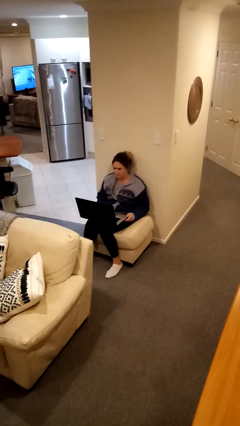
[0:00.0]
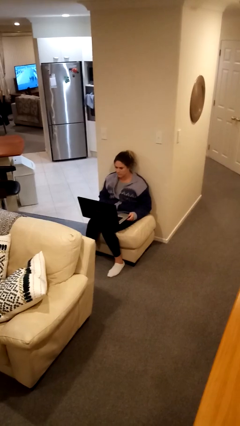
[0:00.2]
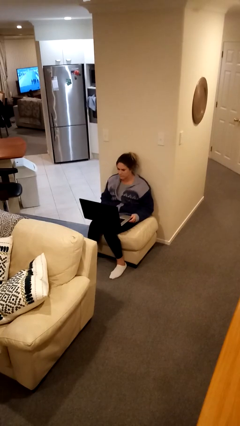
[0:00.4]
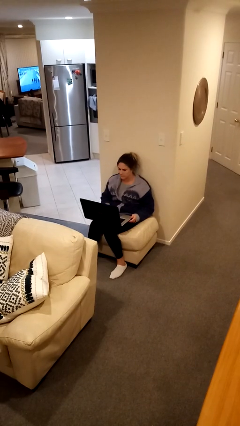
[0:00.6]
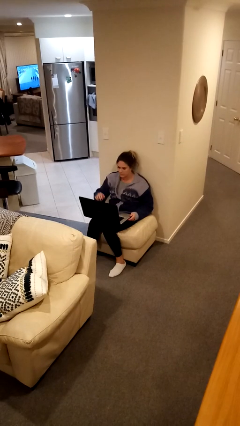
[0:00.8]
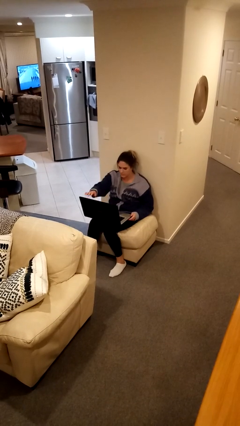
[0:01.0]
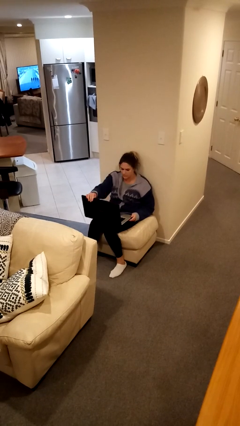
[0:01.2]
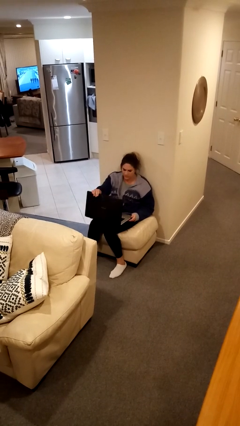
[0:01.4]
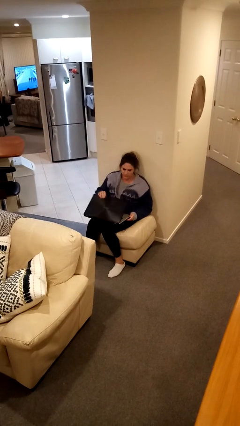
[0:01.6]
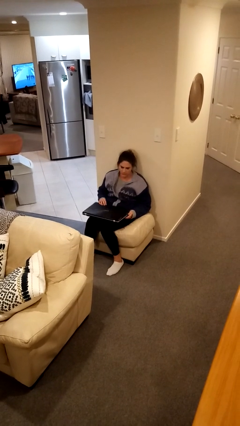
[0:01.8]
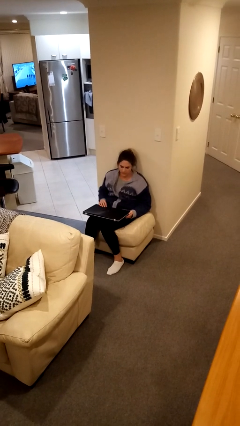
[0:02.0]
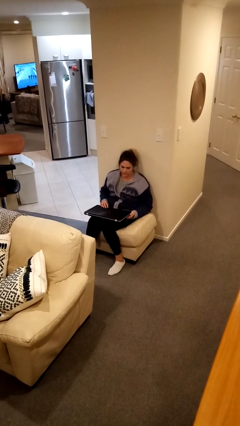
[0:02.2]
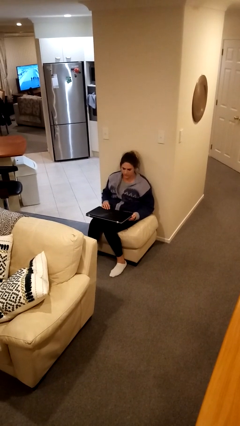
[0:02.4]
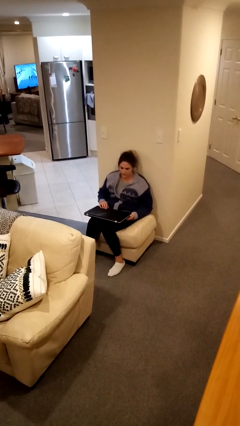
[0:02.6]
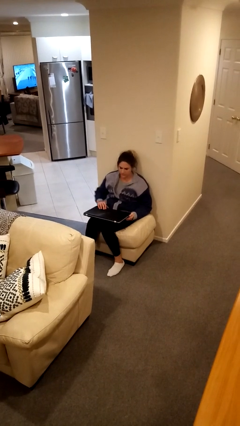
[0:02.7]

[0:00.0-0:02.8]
person closes laptop

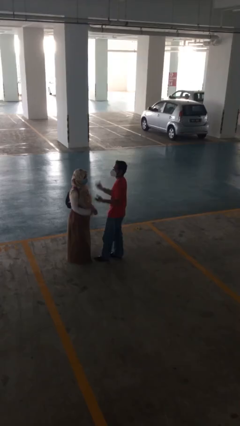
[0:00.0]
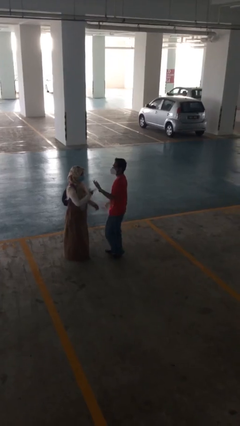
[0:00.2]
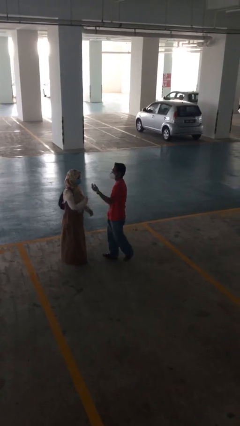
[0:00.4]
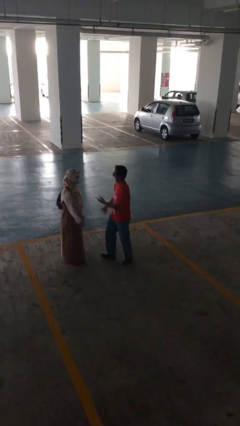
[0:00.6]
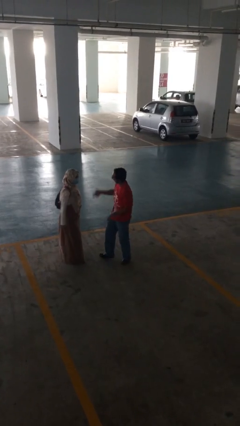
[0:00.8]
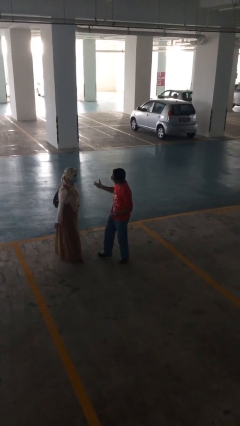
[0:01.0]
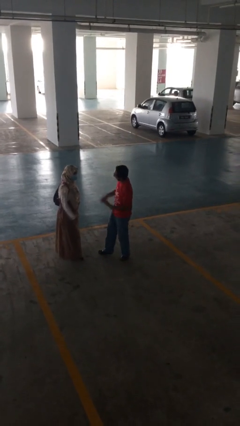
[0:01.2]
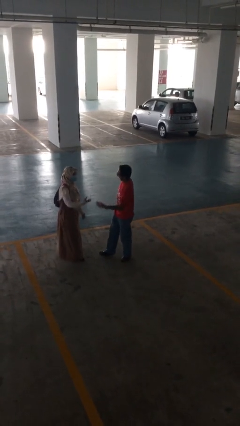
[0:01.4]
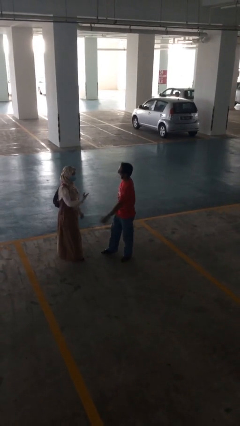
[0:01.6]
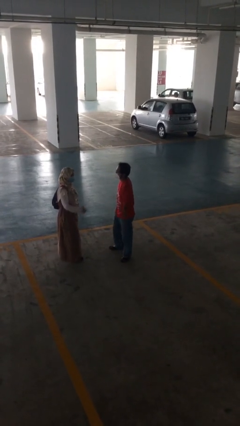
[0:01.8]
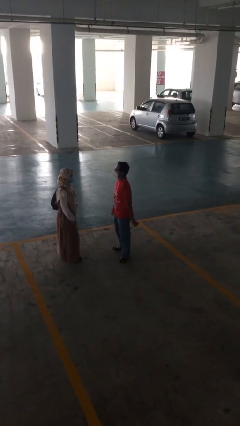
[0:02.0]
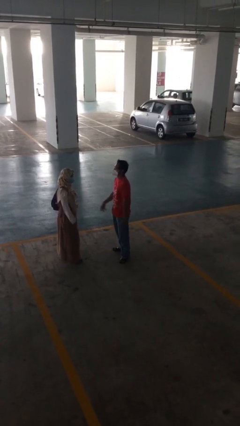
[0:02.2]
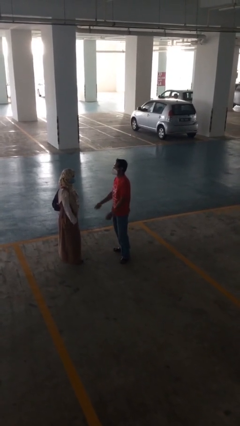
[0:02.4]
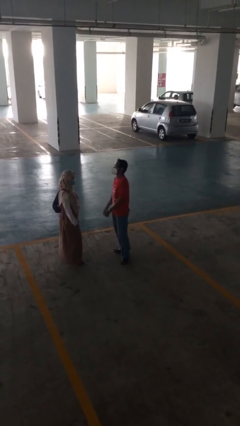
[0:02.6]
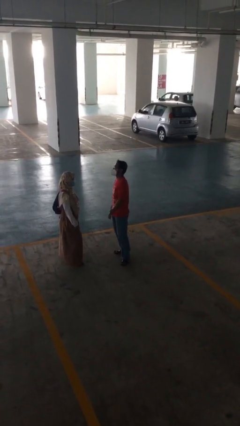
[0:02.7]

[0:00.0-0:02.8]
person talks to person

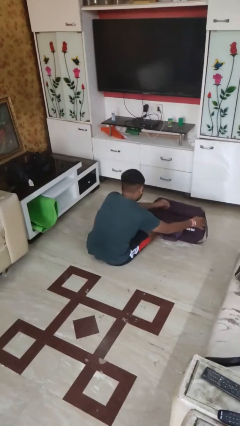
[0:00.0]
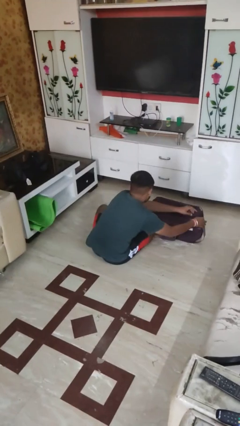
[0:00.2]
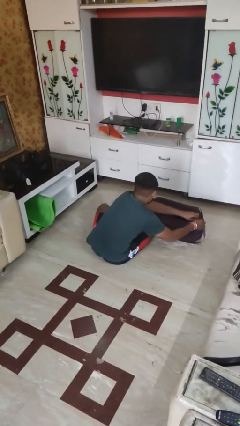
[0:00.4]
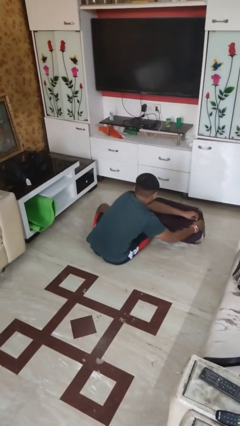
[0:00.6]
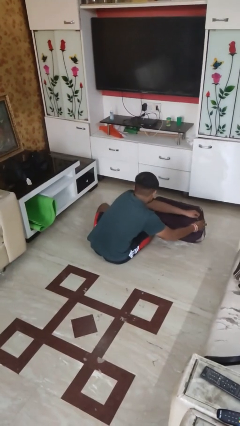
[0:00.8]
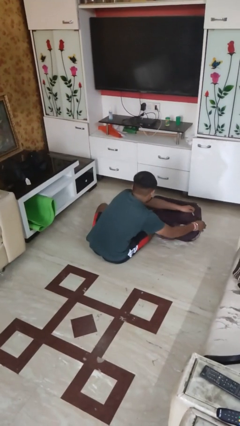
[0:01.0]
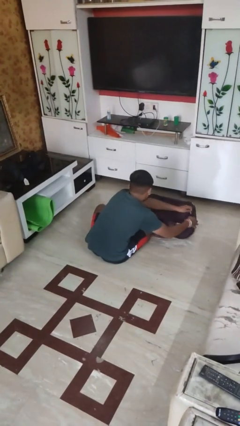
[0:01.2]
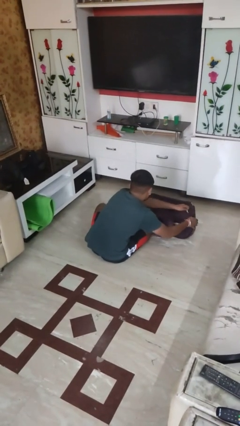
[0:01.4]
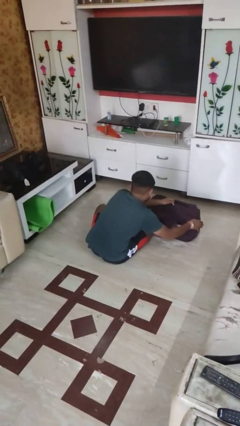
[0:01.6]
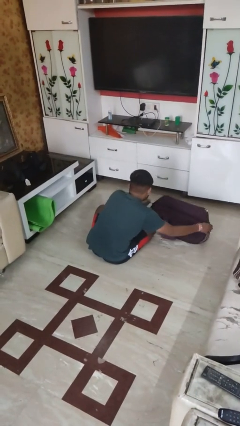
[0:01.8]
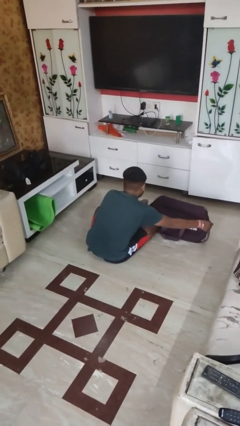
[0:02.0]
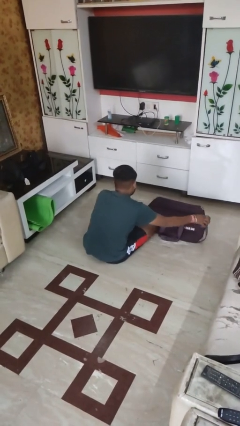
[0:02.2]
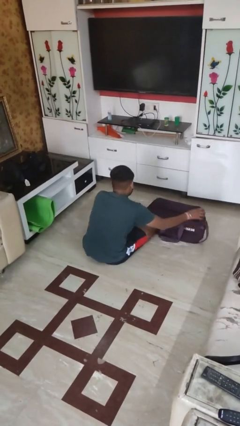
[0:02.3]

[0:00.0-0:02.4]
person closes suitcase

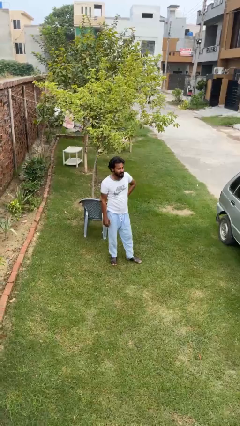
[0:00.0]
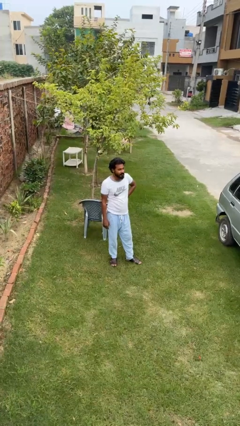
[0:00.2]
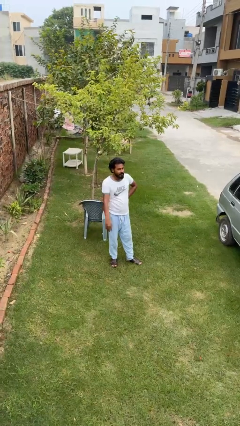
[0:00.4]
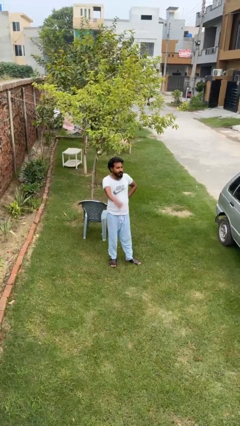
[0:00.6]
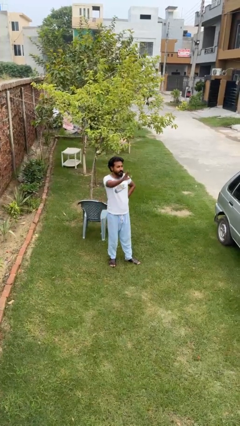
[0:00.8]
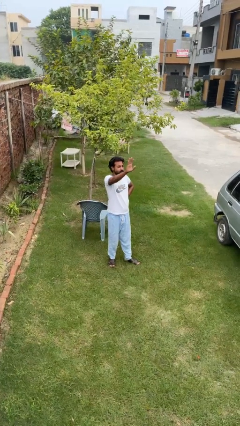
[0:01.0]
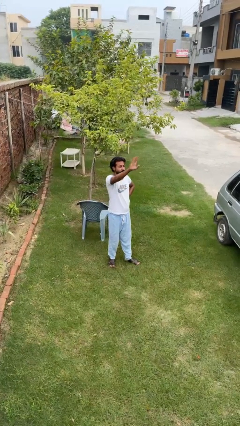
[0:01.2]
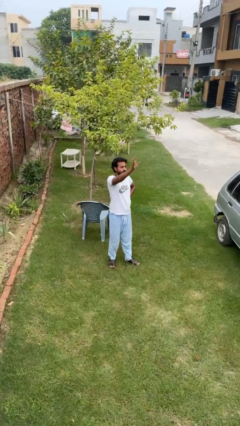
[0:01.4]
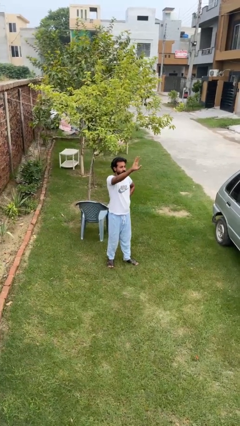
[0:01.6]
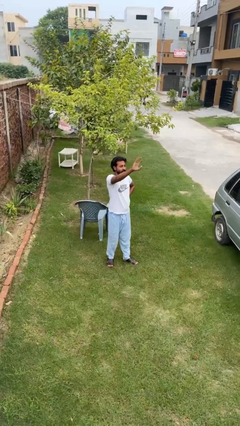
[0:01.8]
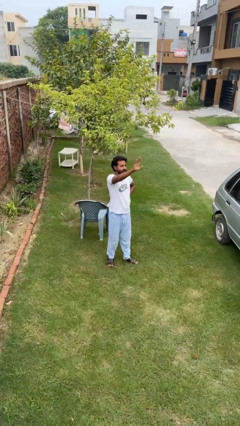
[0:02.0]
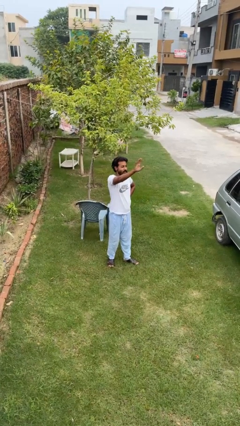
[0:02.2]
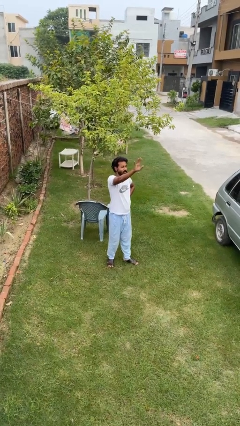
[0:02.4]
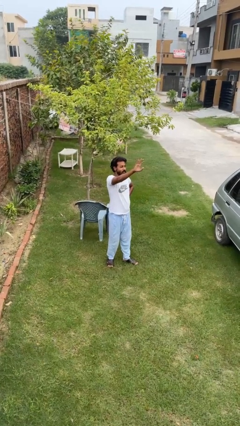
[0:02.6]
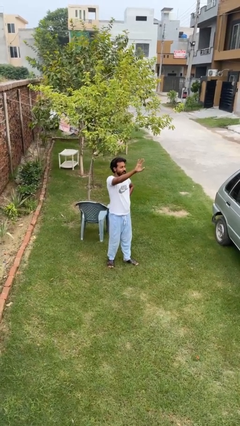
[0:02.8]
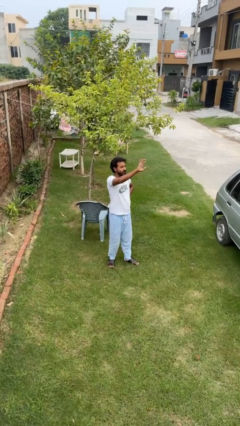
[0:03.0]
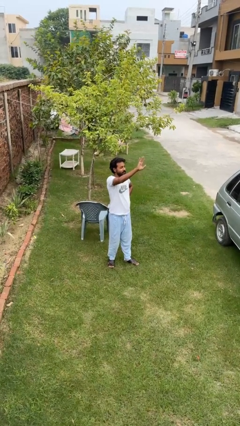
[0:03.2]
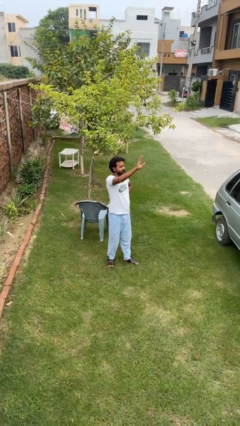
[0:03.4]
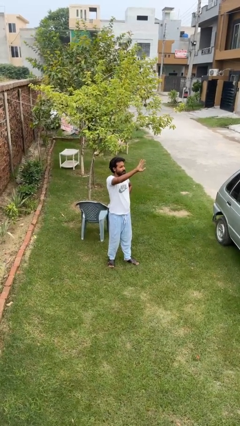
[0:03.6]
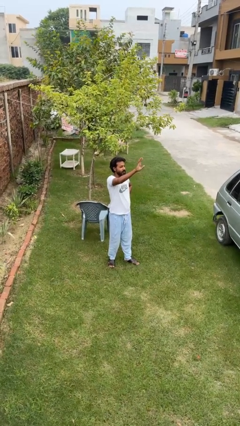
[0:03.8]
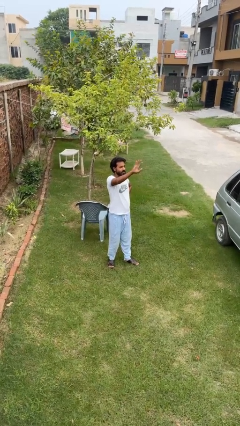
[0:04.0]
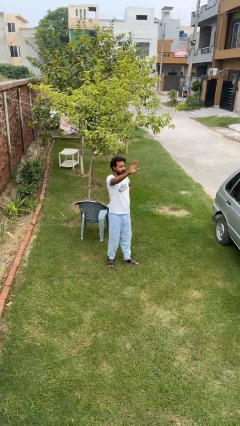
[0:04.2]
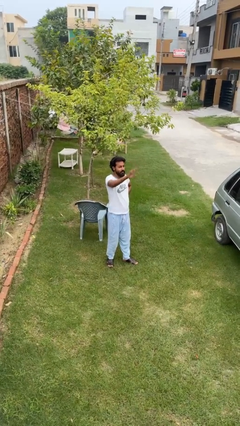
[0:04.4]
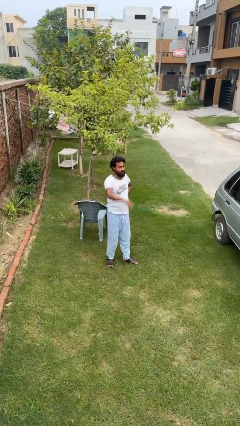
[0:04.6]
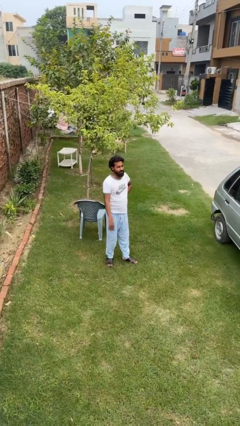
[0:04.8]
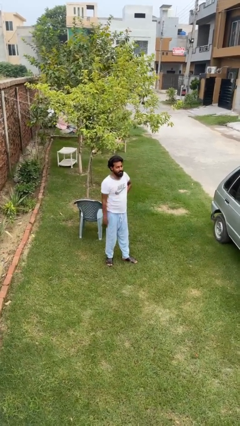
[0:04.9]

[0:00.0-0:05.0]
person waves at person

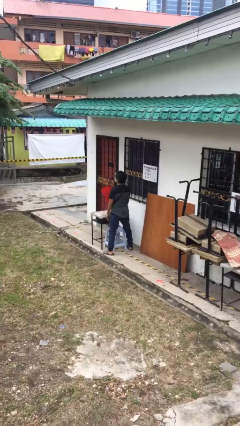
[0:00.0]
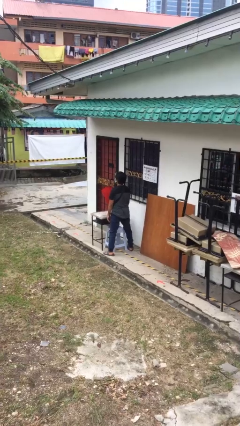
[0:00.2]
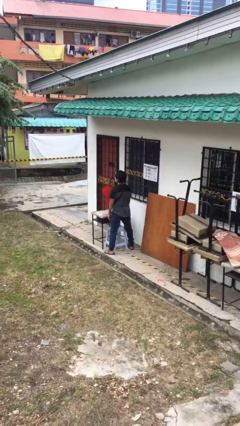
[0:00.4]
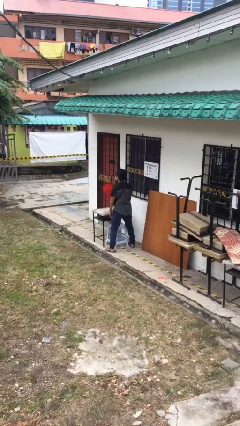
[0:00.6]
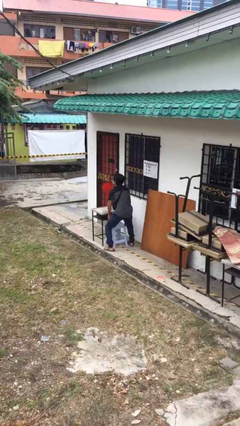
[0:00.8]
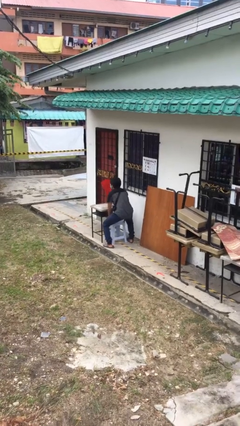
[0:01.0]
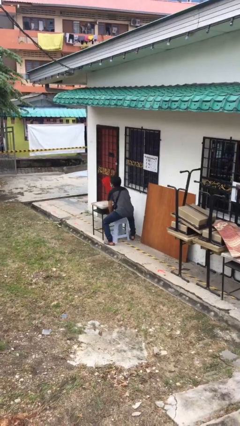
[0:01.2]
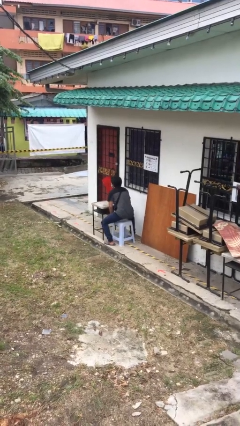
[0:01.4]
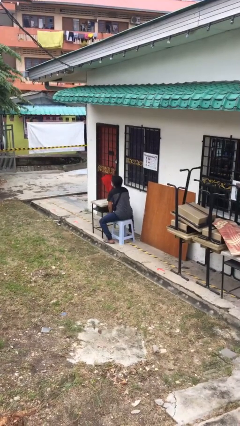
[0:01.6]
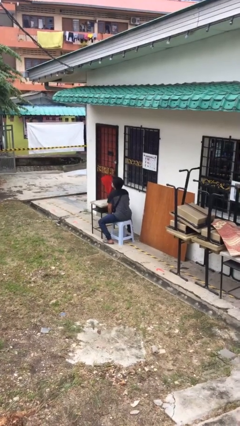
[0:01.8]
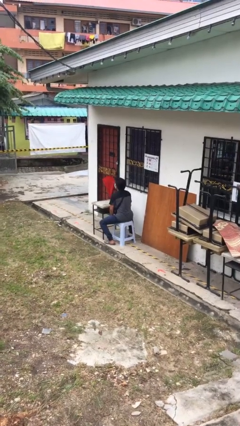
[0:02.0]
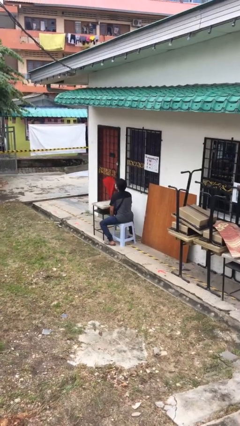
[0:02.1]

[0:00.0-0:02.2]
person sits down

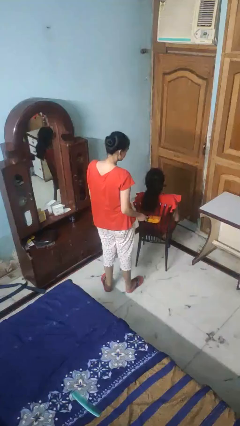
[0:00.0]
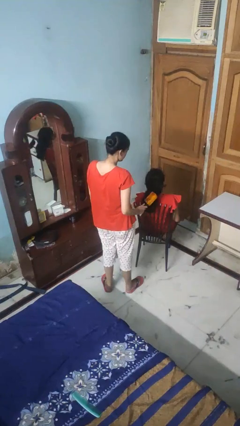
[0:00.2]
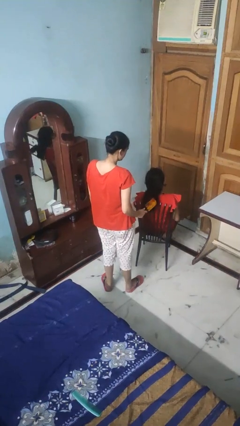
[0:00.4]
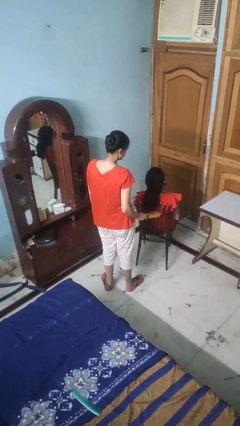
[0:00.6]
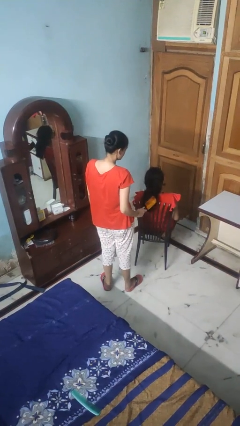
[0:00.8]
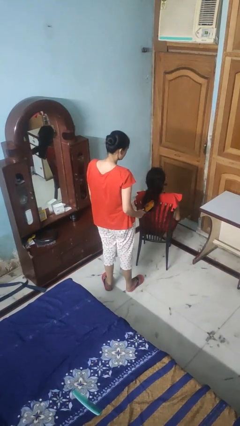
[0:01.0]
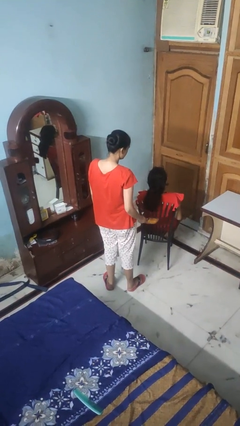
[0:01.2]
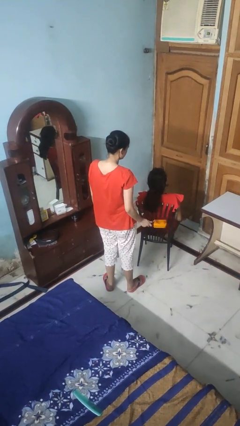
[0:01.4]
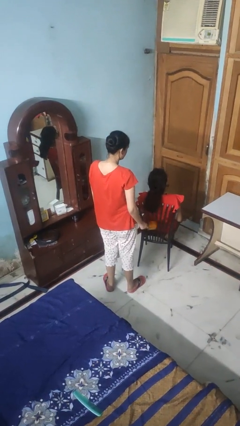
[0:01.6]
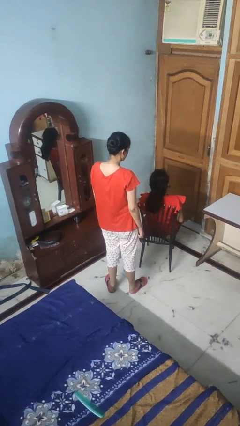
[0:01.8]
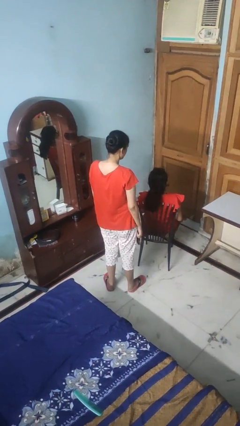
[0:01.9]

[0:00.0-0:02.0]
person brushes hair of person

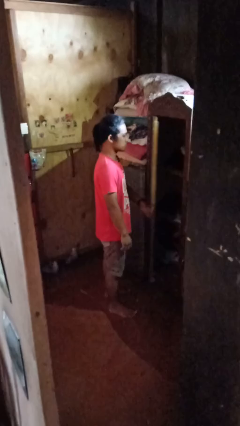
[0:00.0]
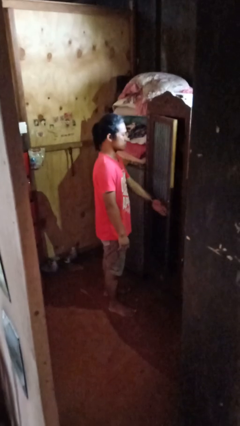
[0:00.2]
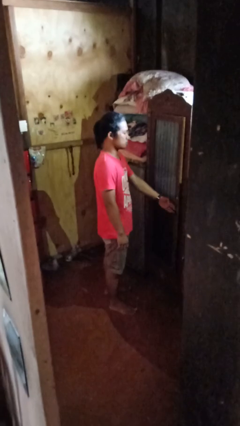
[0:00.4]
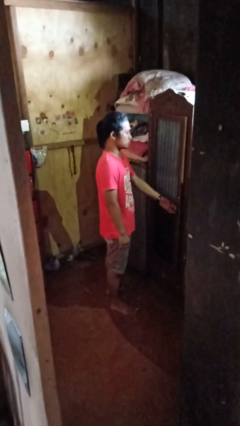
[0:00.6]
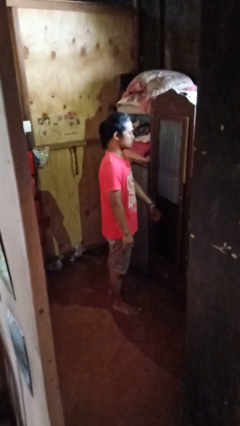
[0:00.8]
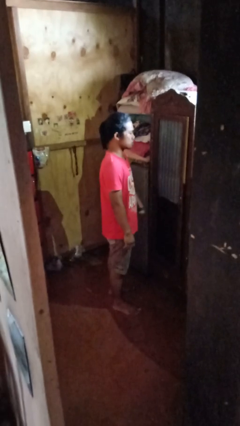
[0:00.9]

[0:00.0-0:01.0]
person closes closet door
